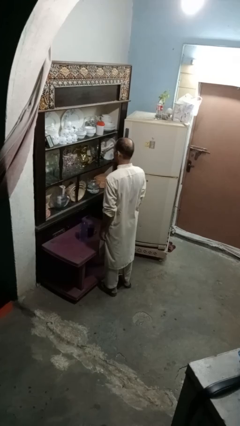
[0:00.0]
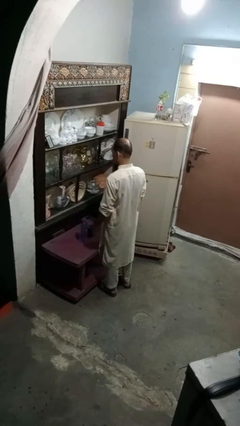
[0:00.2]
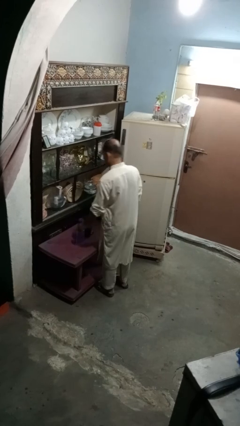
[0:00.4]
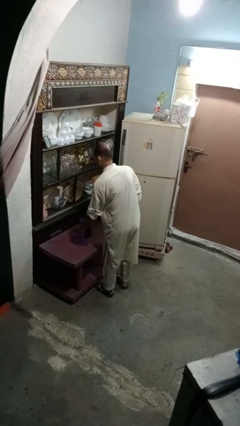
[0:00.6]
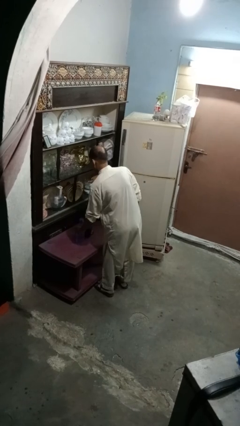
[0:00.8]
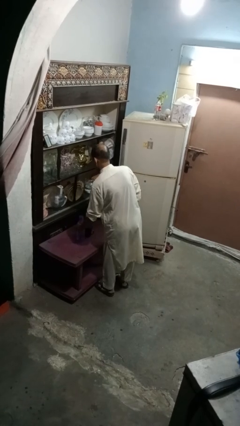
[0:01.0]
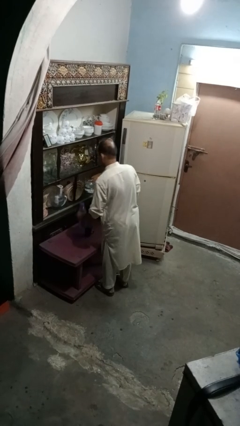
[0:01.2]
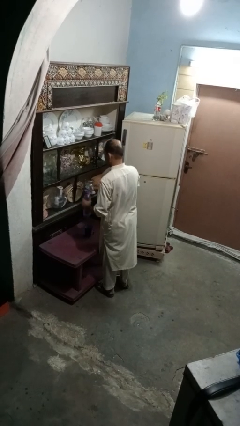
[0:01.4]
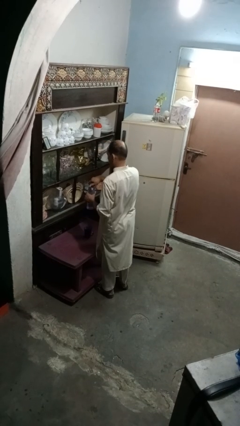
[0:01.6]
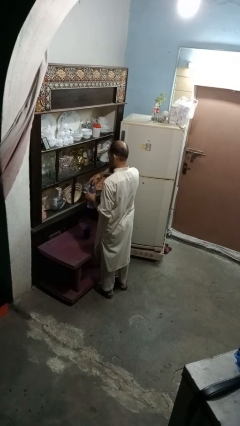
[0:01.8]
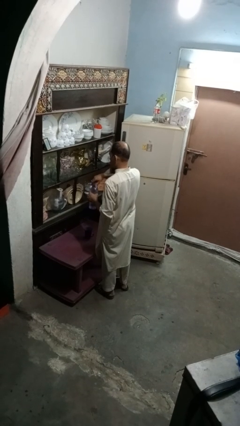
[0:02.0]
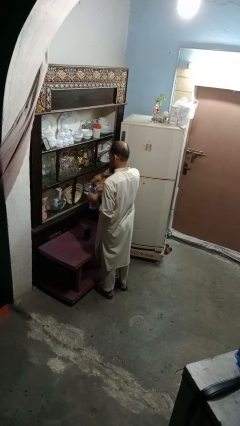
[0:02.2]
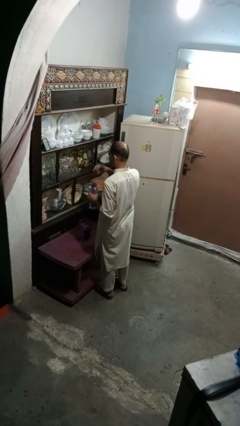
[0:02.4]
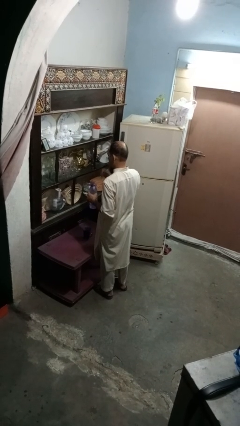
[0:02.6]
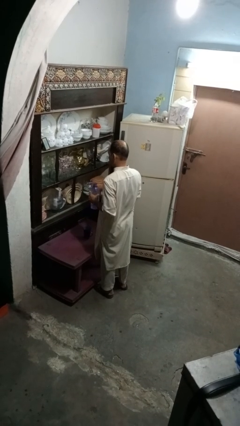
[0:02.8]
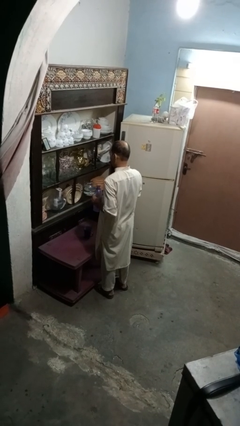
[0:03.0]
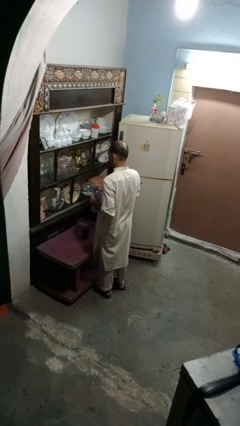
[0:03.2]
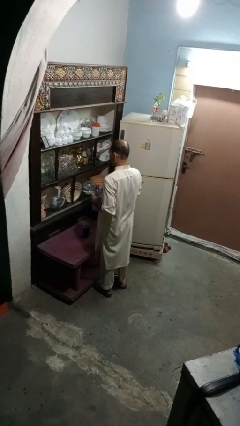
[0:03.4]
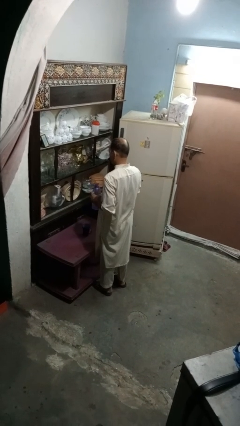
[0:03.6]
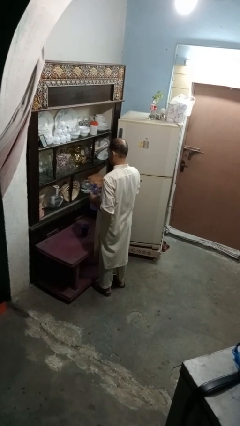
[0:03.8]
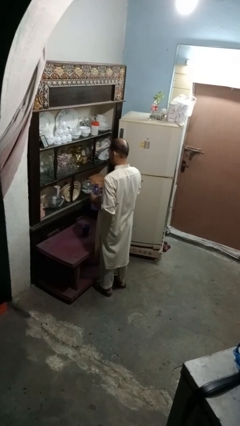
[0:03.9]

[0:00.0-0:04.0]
person unscrews lid from bottle

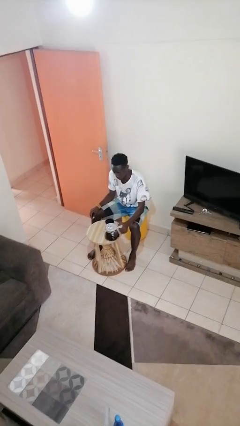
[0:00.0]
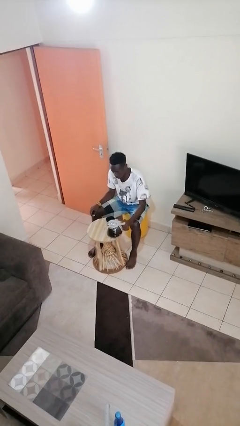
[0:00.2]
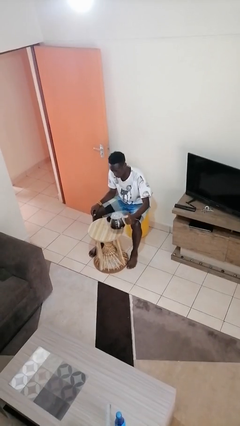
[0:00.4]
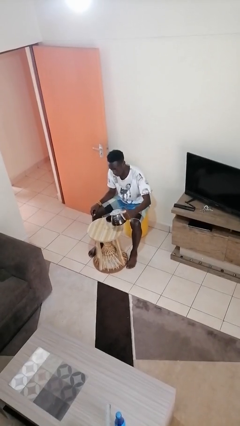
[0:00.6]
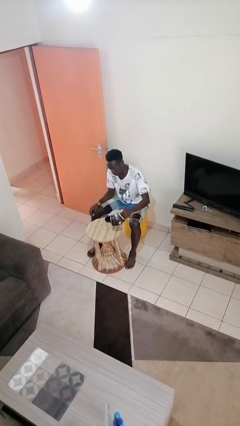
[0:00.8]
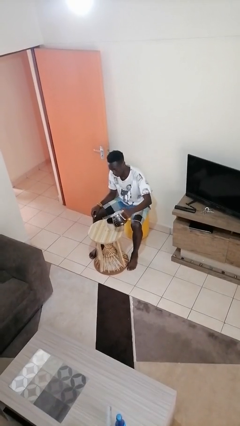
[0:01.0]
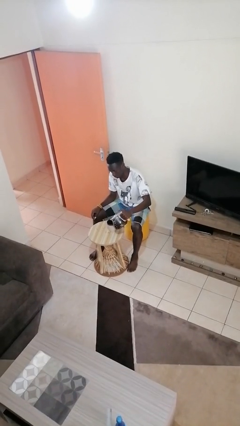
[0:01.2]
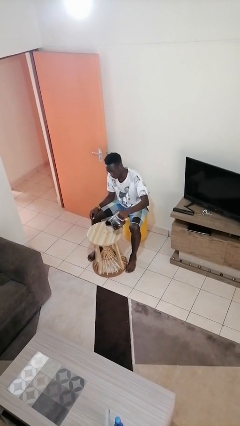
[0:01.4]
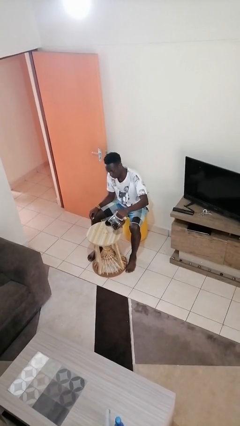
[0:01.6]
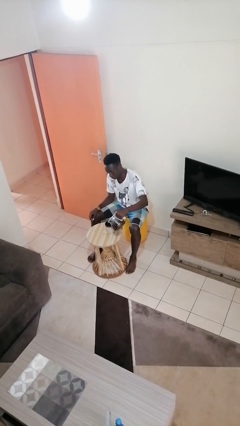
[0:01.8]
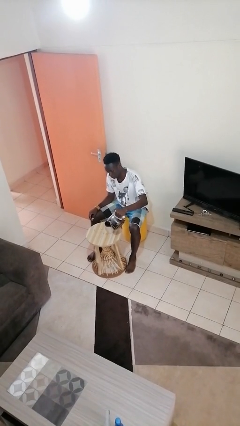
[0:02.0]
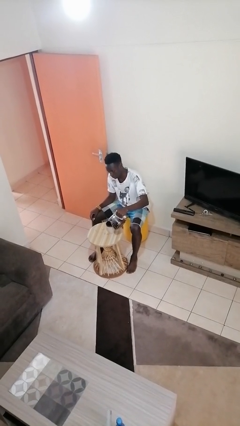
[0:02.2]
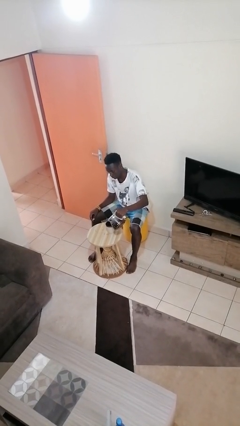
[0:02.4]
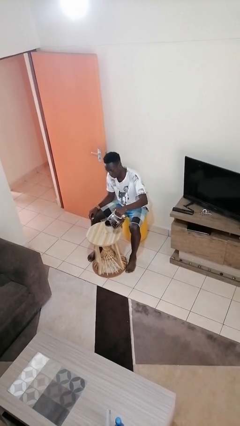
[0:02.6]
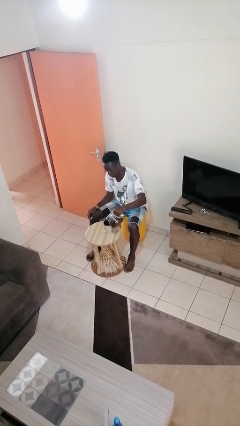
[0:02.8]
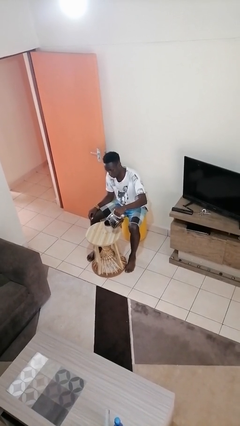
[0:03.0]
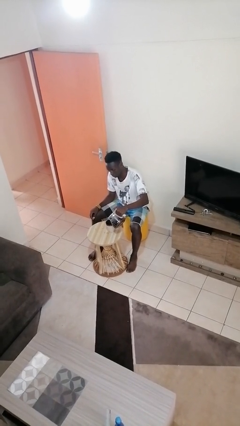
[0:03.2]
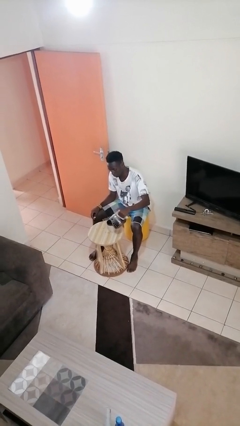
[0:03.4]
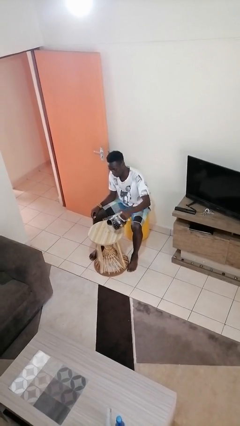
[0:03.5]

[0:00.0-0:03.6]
person pours coffee into mug

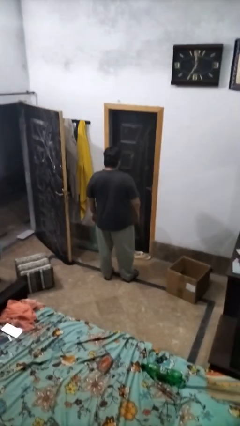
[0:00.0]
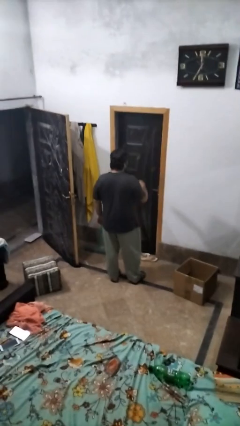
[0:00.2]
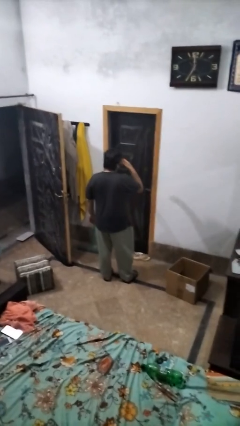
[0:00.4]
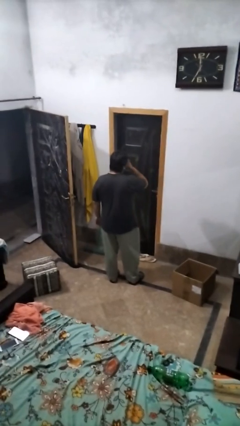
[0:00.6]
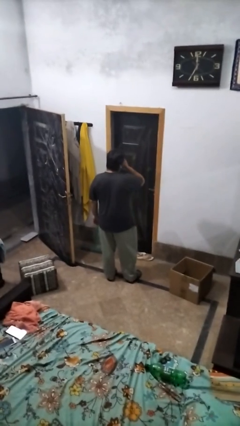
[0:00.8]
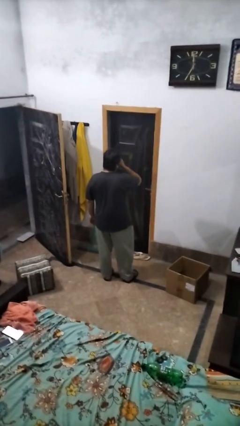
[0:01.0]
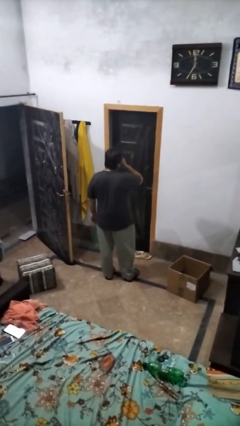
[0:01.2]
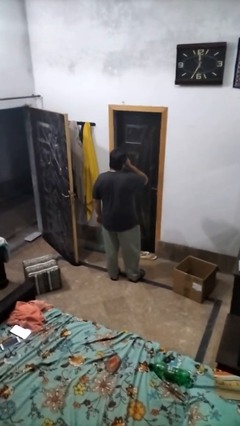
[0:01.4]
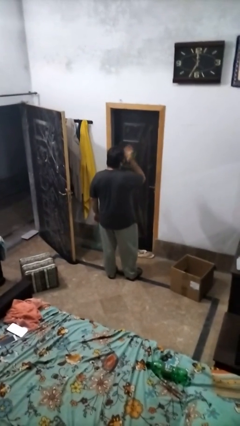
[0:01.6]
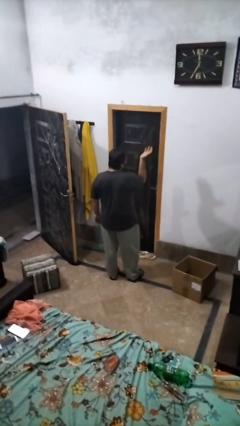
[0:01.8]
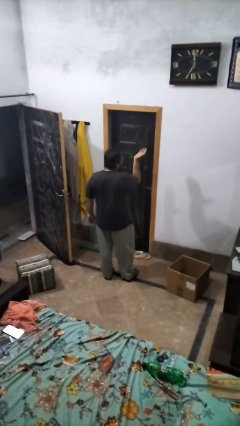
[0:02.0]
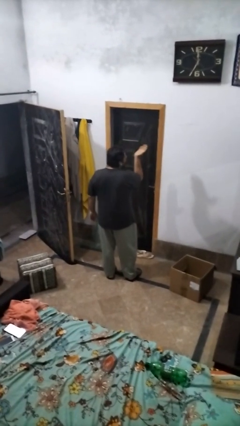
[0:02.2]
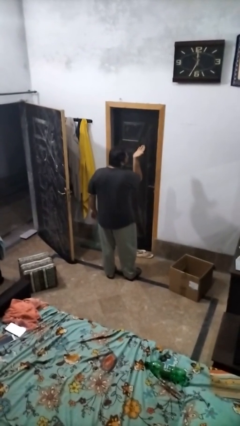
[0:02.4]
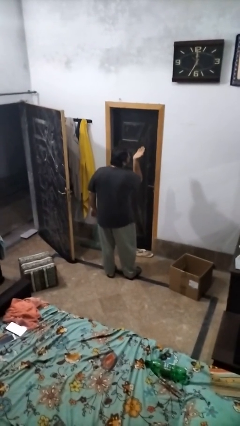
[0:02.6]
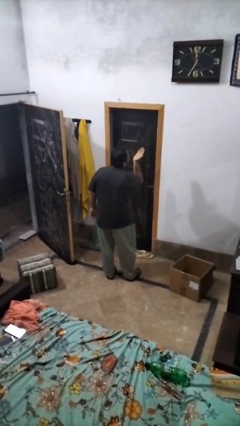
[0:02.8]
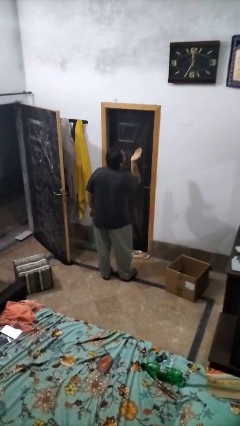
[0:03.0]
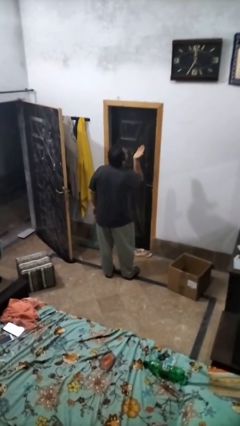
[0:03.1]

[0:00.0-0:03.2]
person gestures blow kiss

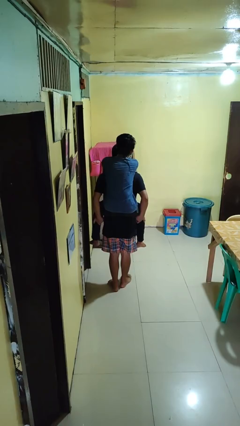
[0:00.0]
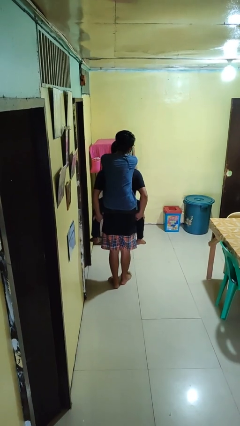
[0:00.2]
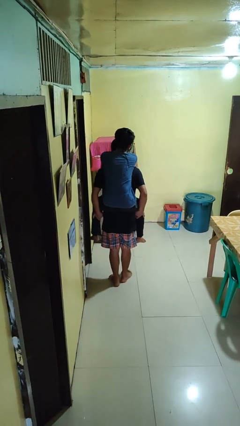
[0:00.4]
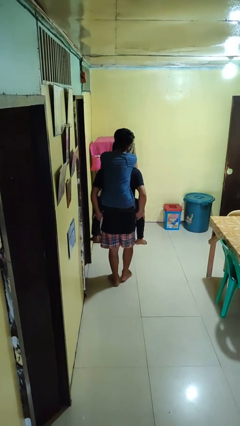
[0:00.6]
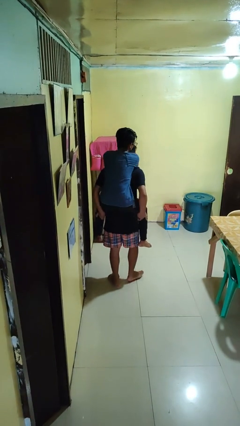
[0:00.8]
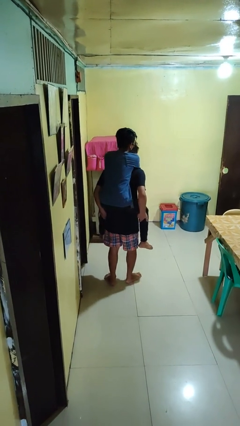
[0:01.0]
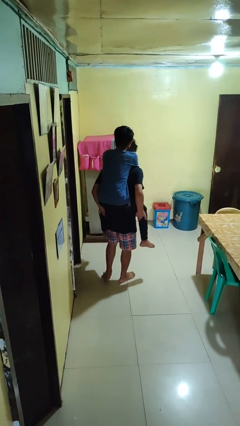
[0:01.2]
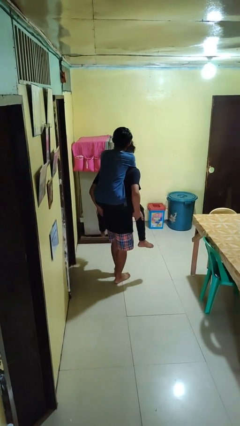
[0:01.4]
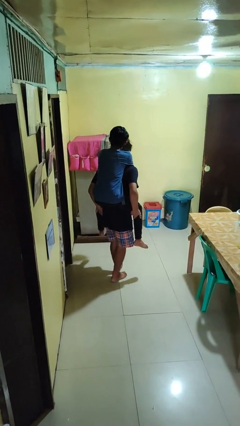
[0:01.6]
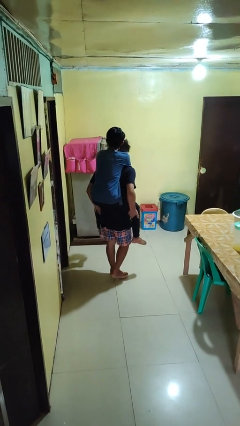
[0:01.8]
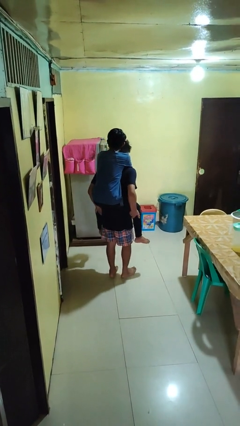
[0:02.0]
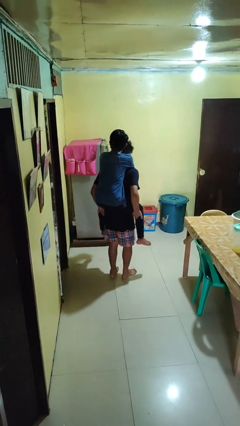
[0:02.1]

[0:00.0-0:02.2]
person carries person on back

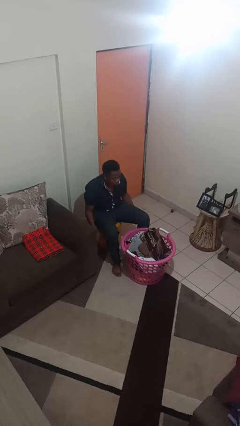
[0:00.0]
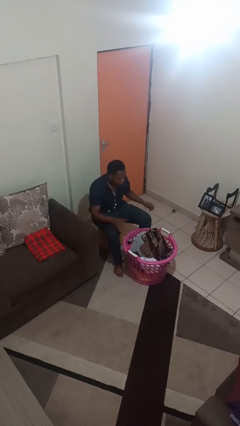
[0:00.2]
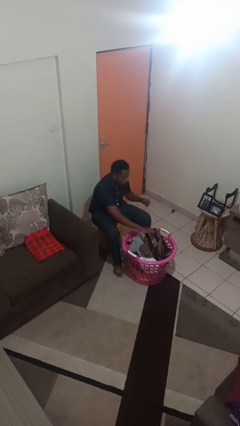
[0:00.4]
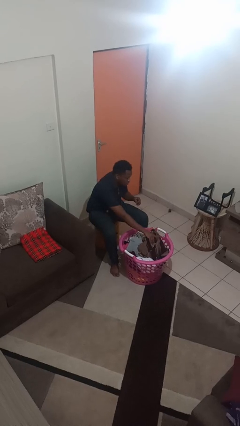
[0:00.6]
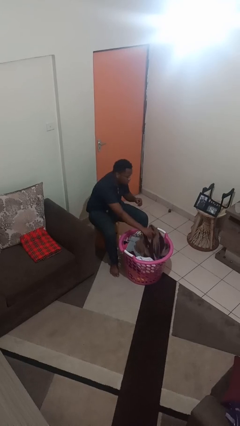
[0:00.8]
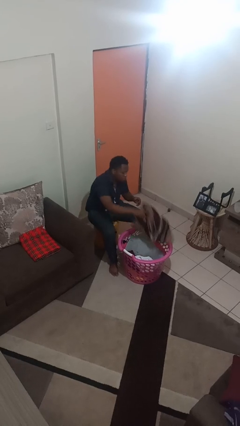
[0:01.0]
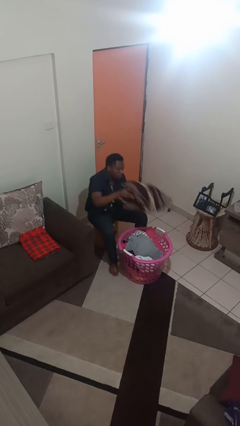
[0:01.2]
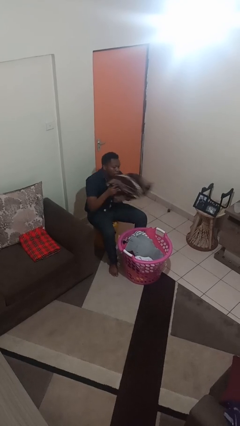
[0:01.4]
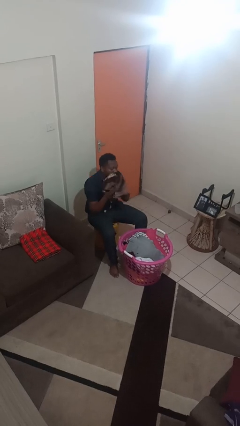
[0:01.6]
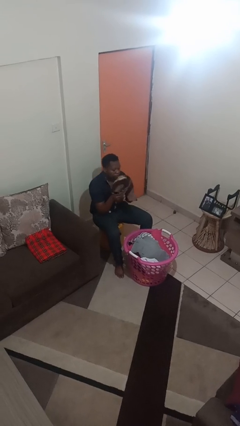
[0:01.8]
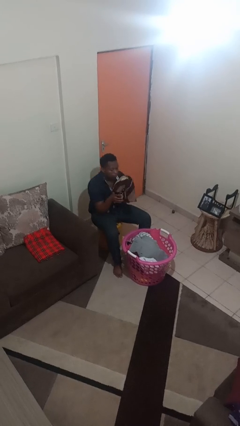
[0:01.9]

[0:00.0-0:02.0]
person takes object from basket

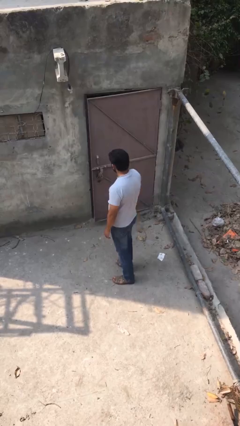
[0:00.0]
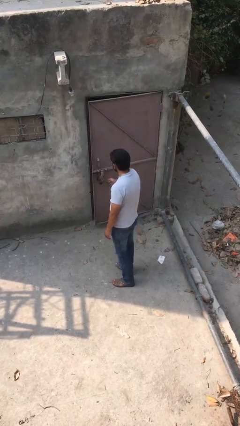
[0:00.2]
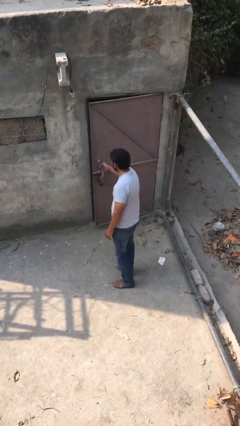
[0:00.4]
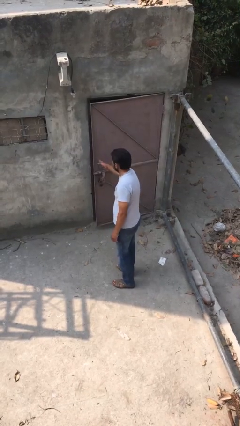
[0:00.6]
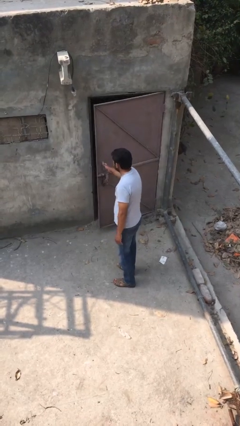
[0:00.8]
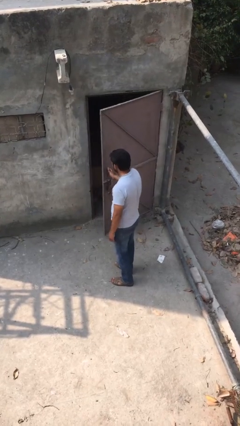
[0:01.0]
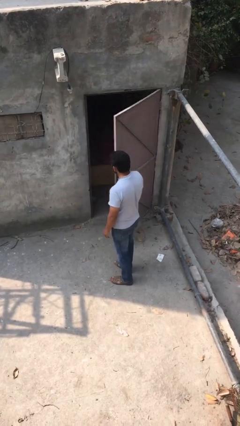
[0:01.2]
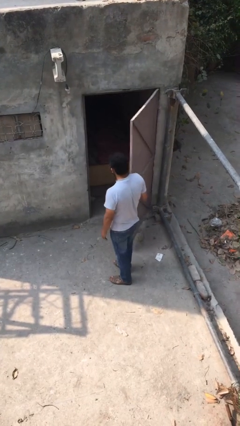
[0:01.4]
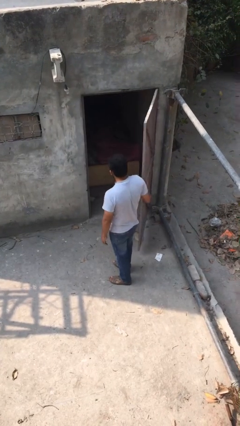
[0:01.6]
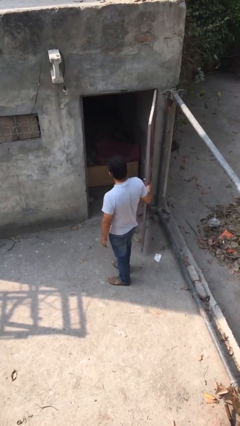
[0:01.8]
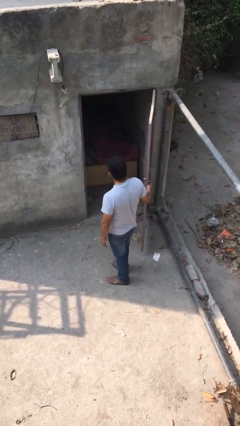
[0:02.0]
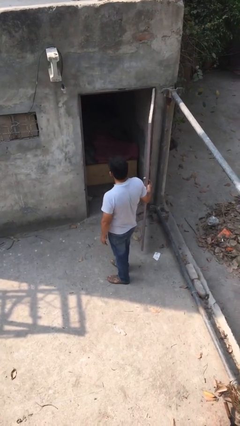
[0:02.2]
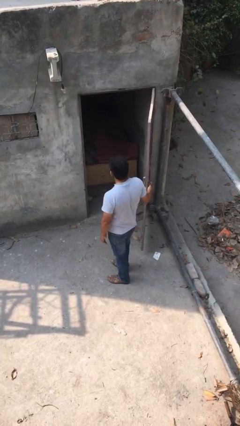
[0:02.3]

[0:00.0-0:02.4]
person opens facility door
